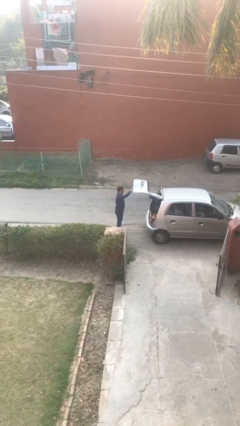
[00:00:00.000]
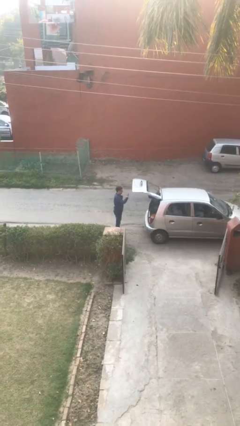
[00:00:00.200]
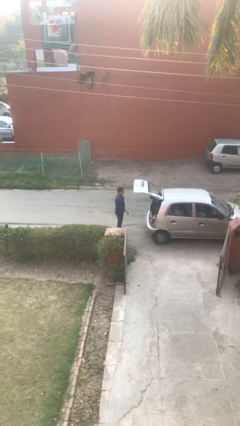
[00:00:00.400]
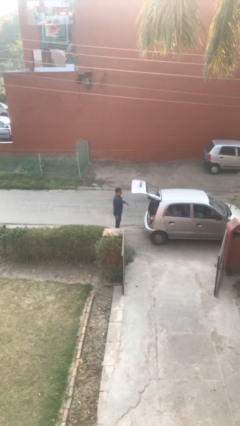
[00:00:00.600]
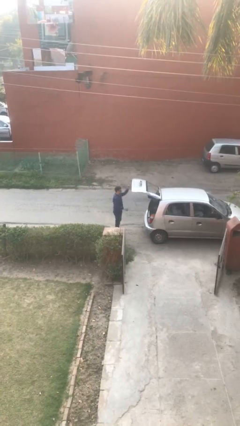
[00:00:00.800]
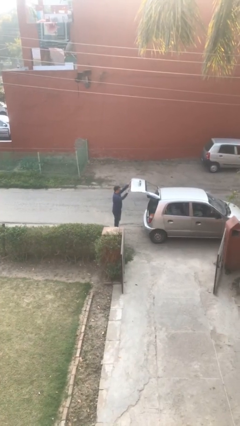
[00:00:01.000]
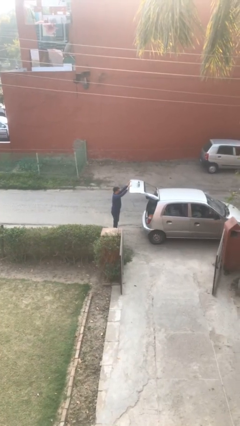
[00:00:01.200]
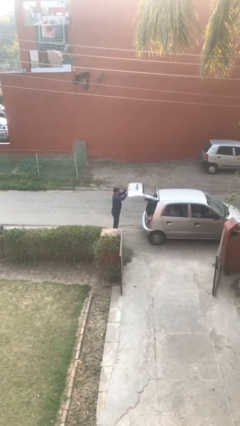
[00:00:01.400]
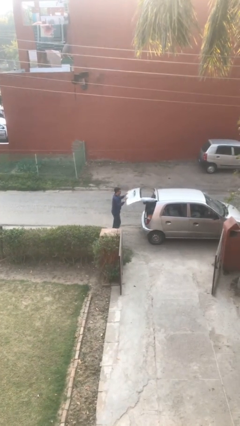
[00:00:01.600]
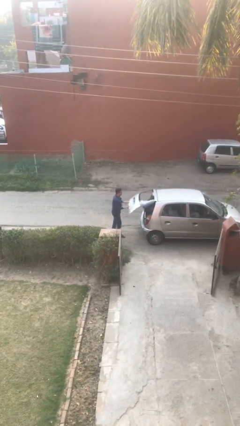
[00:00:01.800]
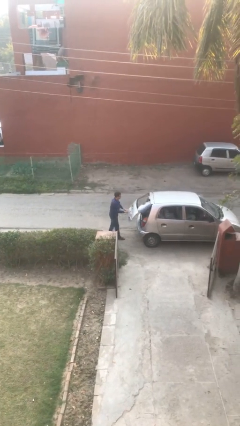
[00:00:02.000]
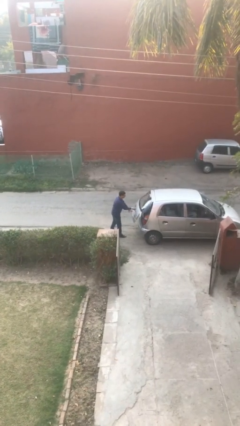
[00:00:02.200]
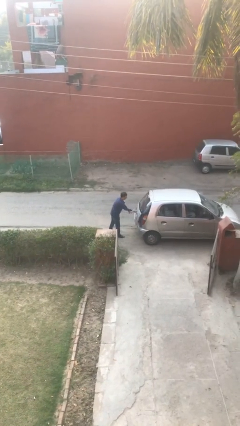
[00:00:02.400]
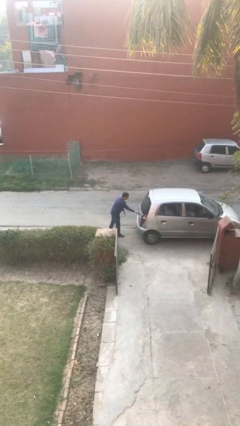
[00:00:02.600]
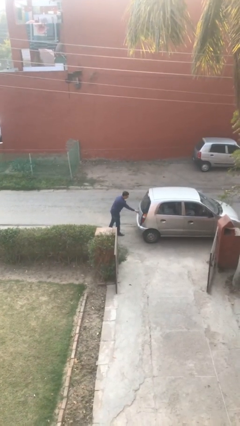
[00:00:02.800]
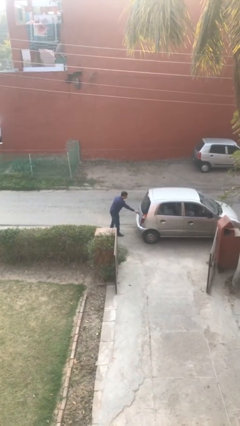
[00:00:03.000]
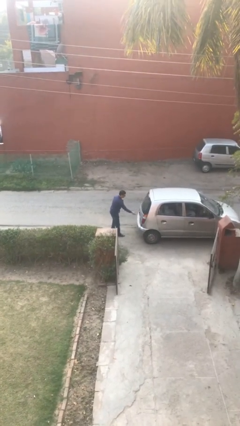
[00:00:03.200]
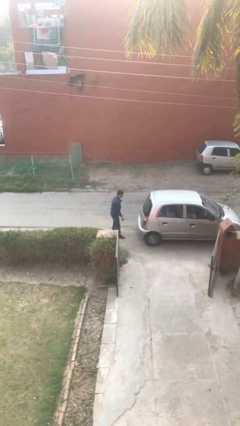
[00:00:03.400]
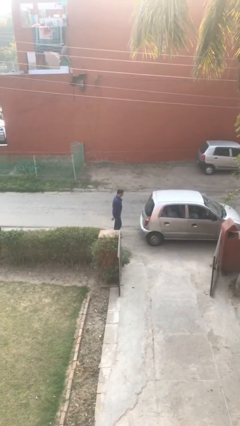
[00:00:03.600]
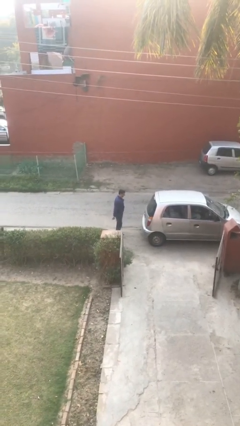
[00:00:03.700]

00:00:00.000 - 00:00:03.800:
person closes car trunk

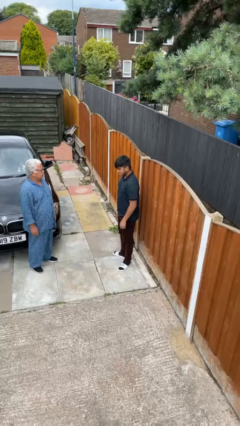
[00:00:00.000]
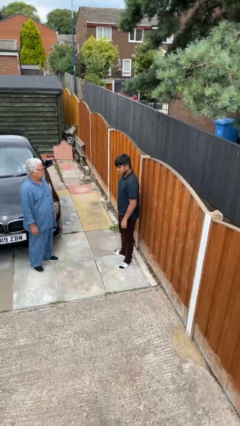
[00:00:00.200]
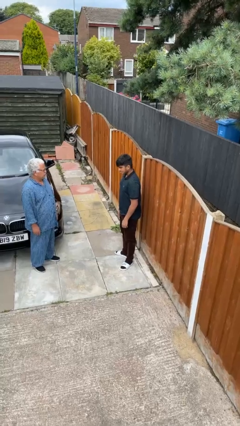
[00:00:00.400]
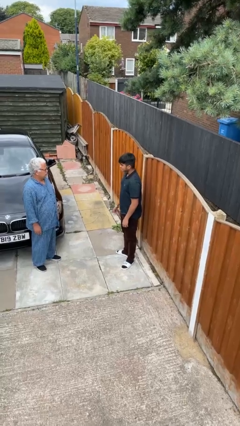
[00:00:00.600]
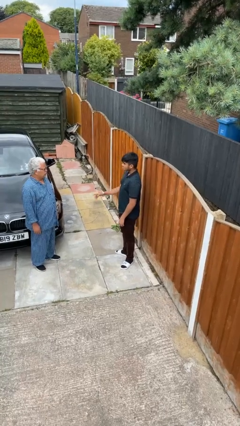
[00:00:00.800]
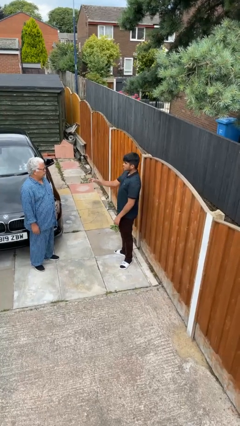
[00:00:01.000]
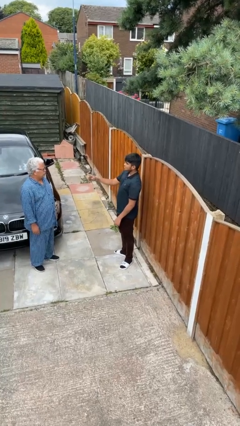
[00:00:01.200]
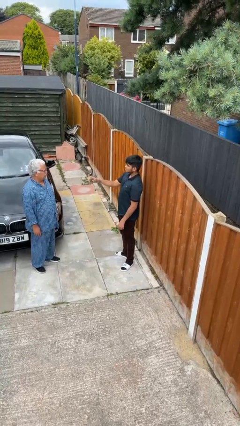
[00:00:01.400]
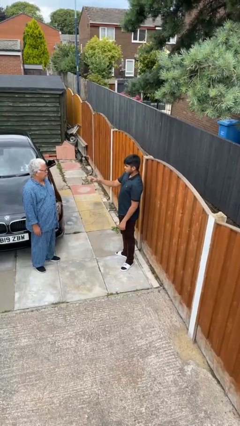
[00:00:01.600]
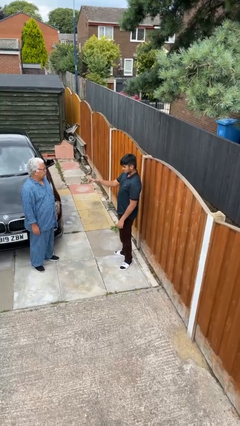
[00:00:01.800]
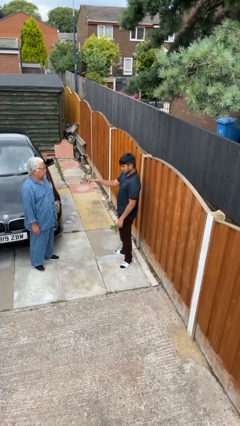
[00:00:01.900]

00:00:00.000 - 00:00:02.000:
person points at person

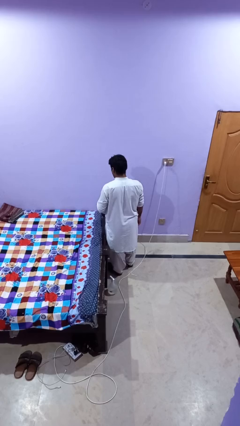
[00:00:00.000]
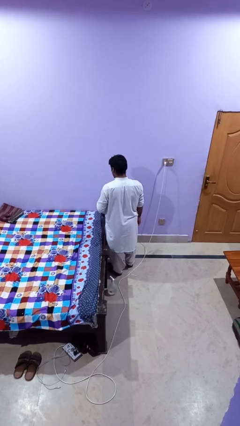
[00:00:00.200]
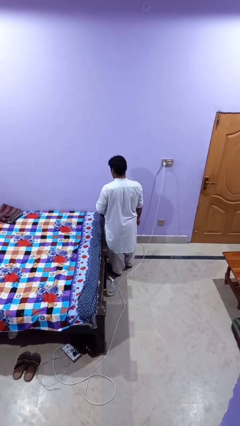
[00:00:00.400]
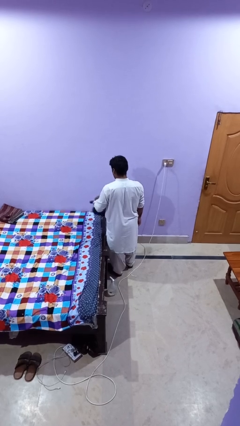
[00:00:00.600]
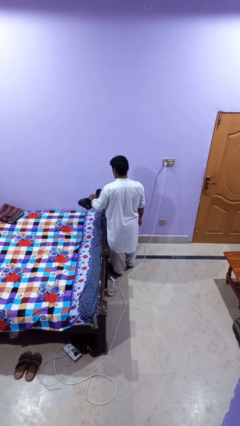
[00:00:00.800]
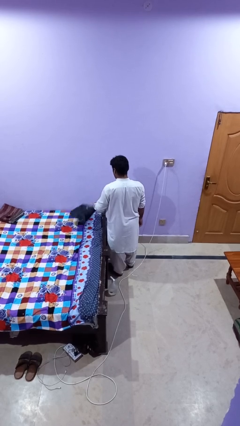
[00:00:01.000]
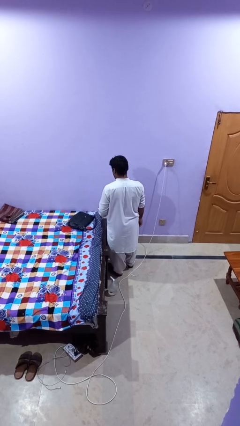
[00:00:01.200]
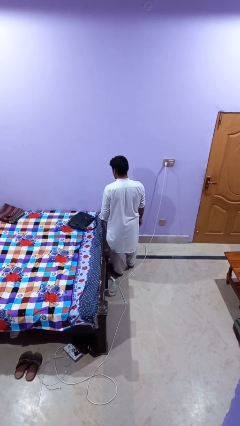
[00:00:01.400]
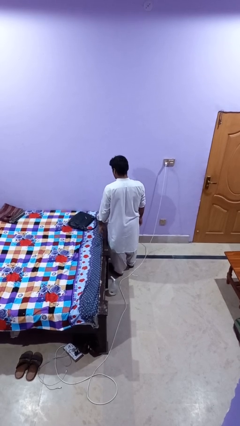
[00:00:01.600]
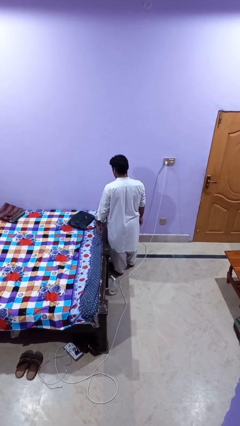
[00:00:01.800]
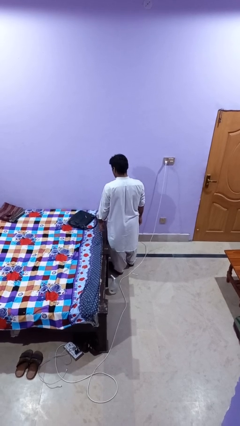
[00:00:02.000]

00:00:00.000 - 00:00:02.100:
person throws object on bed

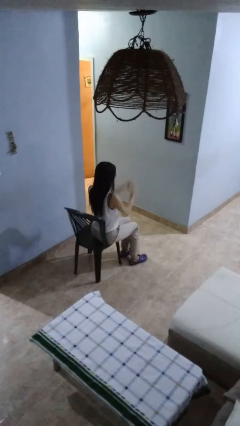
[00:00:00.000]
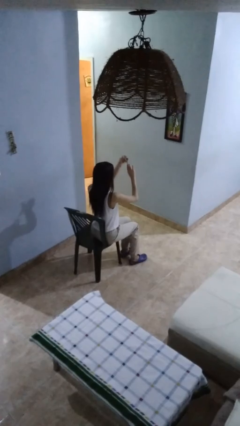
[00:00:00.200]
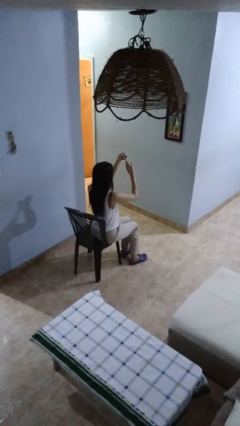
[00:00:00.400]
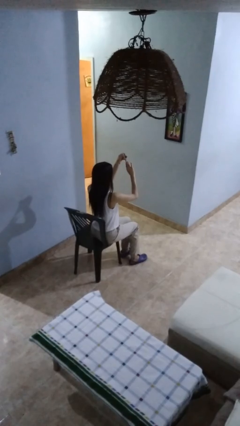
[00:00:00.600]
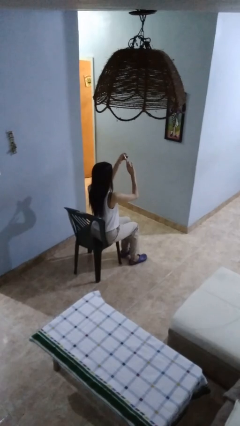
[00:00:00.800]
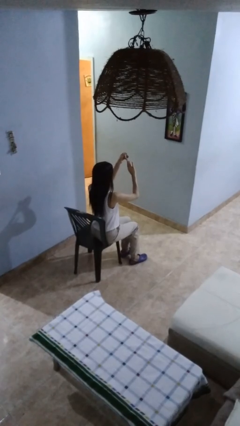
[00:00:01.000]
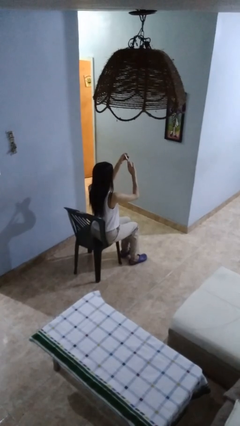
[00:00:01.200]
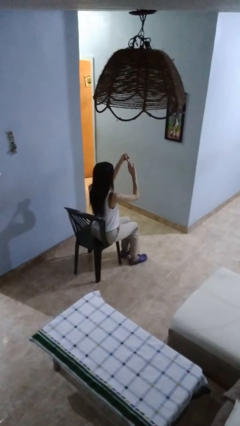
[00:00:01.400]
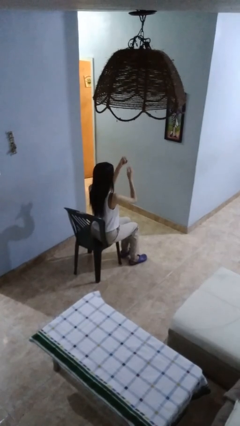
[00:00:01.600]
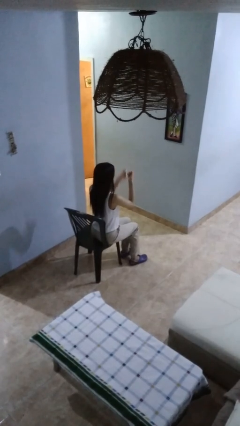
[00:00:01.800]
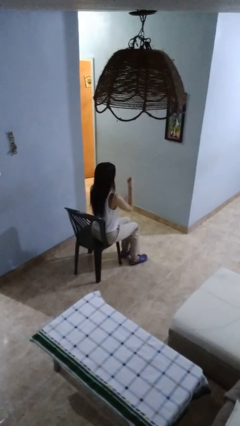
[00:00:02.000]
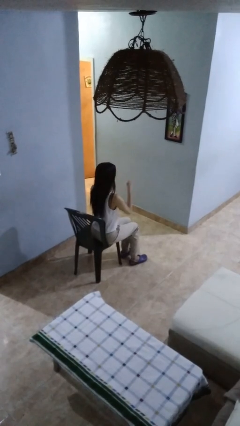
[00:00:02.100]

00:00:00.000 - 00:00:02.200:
person clips fingernails

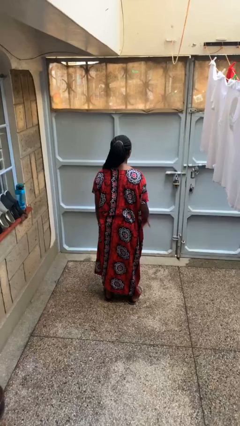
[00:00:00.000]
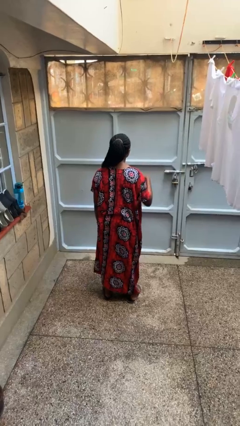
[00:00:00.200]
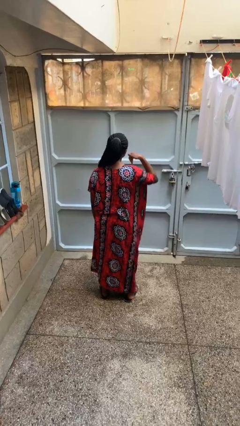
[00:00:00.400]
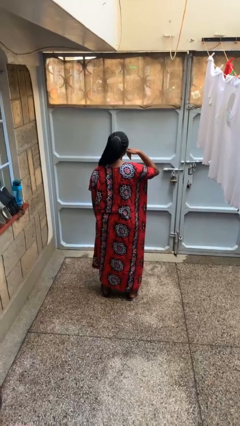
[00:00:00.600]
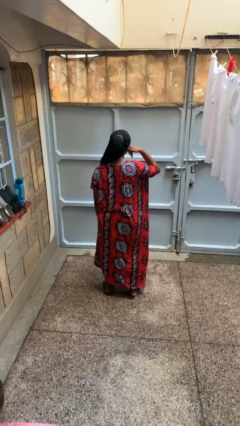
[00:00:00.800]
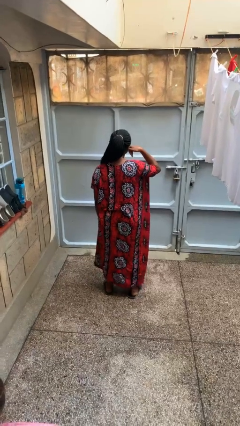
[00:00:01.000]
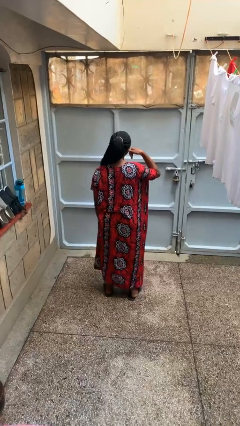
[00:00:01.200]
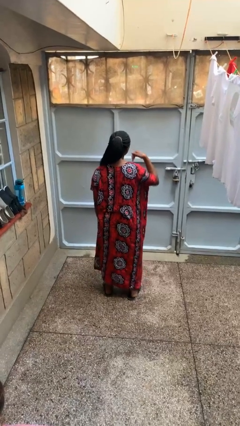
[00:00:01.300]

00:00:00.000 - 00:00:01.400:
person gestures call me

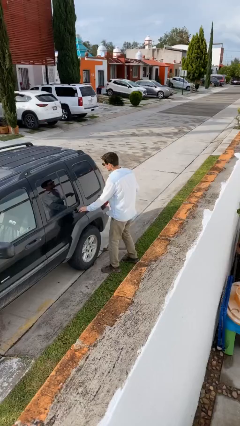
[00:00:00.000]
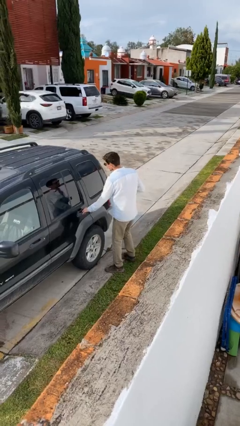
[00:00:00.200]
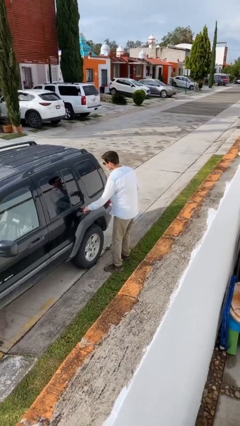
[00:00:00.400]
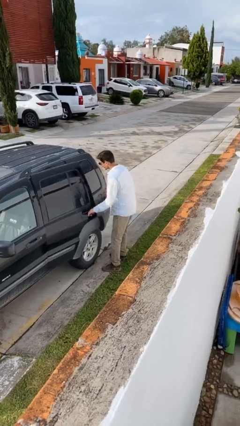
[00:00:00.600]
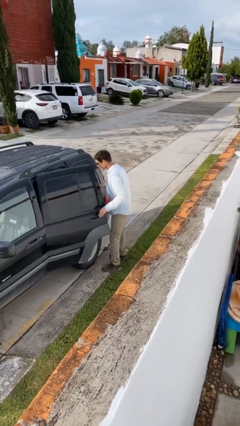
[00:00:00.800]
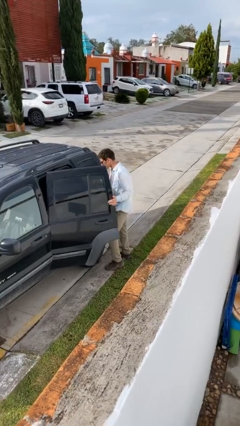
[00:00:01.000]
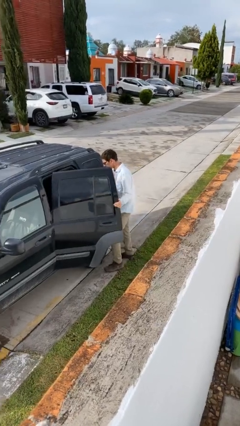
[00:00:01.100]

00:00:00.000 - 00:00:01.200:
person opens car door

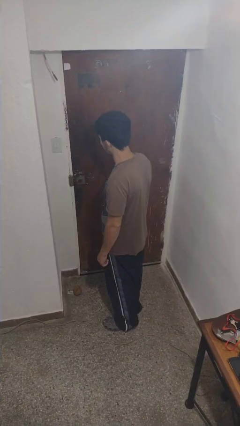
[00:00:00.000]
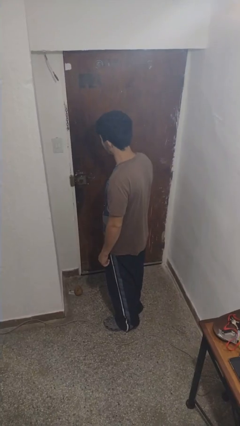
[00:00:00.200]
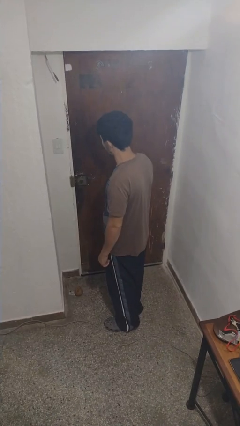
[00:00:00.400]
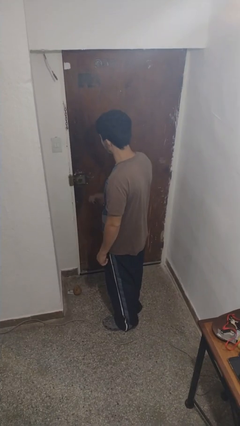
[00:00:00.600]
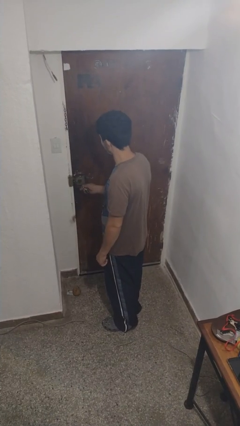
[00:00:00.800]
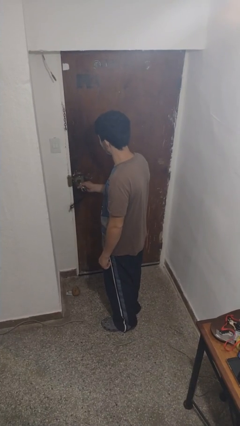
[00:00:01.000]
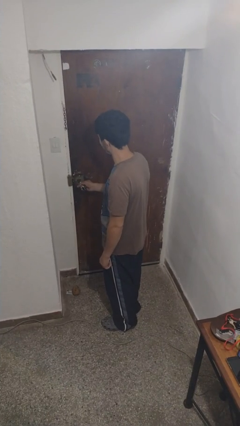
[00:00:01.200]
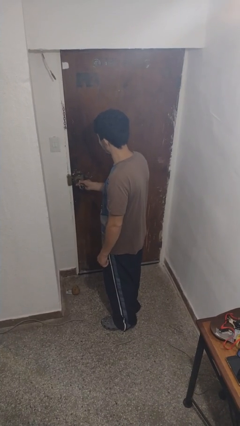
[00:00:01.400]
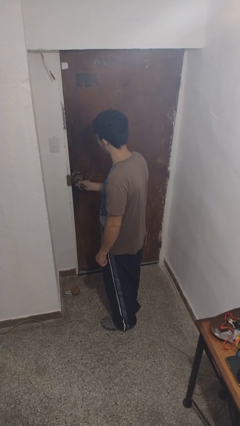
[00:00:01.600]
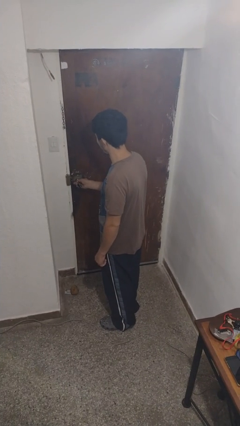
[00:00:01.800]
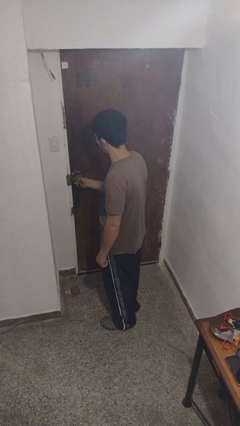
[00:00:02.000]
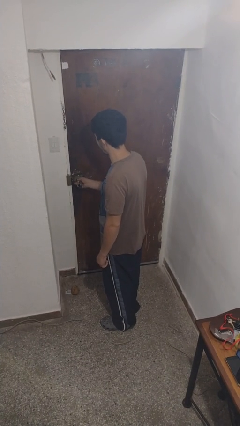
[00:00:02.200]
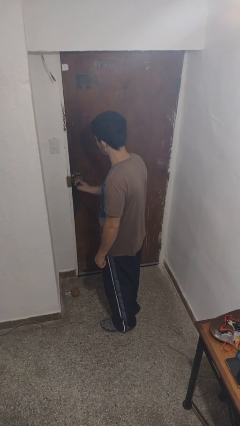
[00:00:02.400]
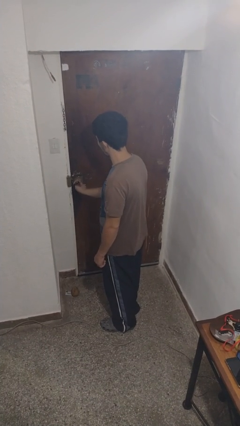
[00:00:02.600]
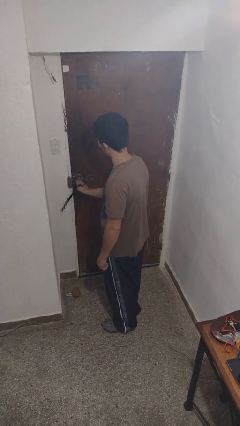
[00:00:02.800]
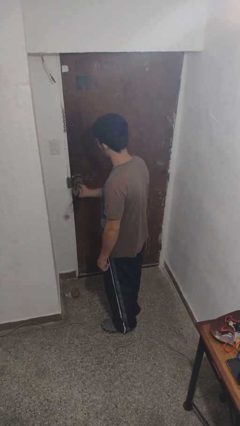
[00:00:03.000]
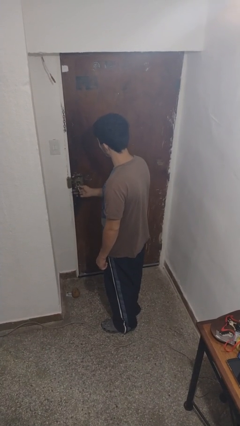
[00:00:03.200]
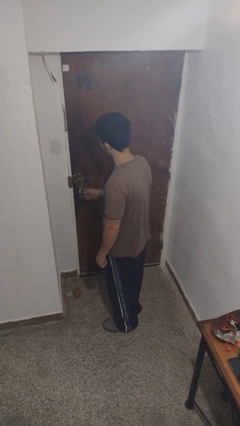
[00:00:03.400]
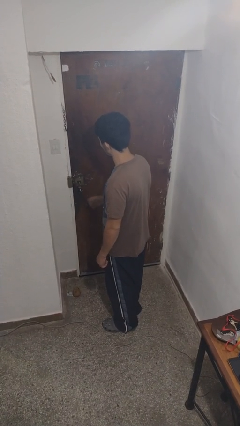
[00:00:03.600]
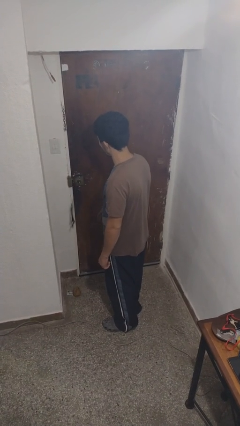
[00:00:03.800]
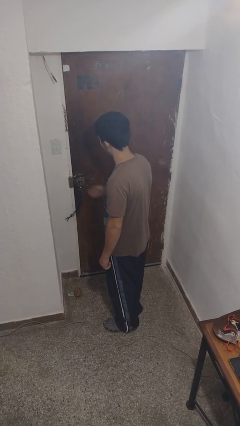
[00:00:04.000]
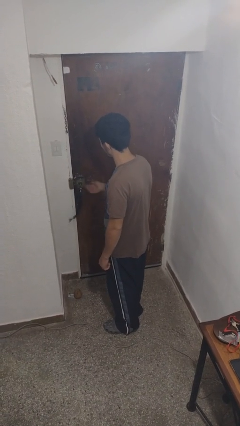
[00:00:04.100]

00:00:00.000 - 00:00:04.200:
person unlocks door with keys
